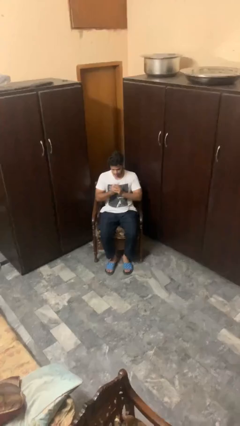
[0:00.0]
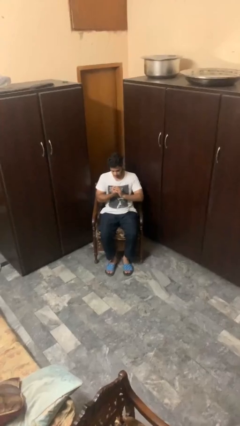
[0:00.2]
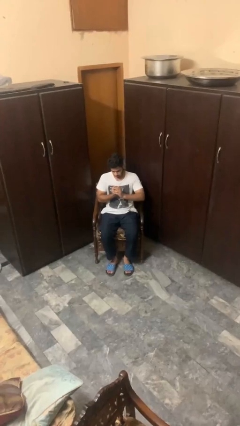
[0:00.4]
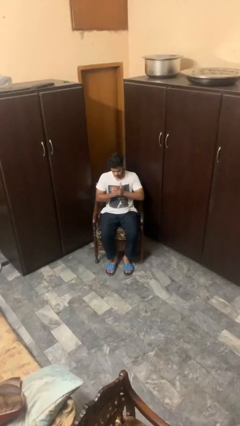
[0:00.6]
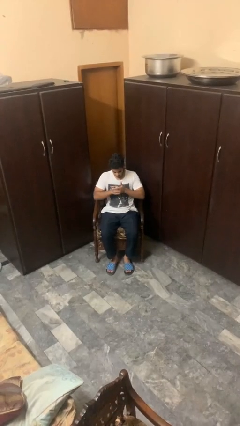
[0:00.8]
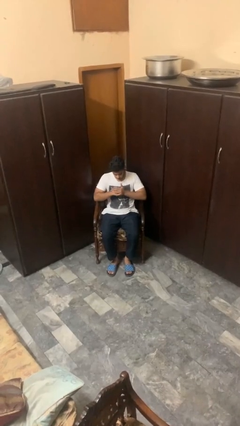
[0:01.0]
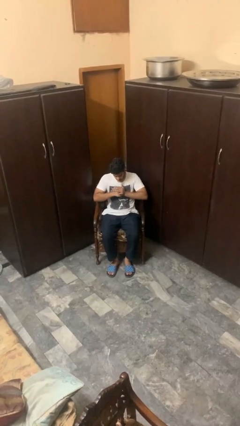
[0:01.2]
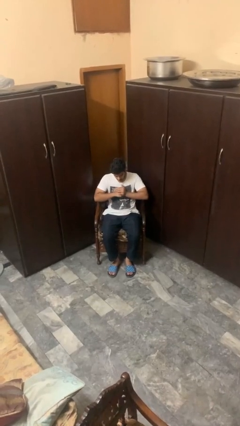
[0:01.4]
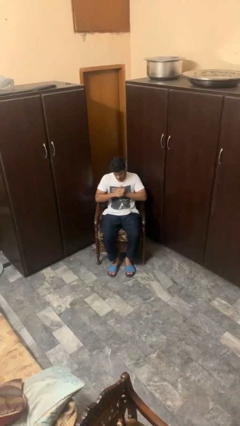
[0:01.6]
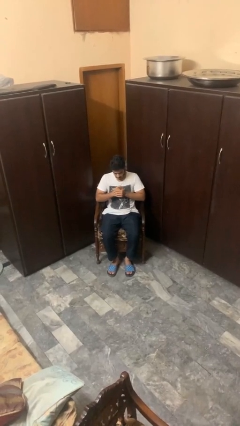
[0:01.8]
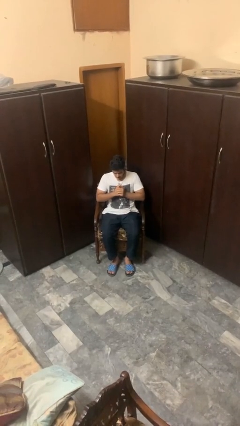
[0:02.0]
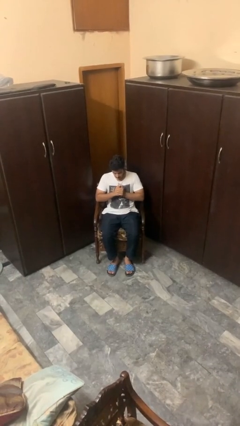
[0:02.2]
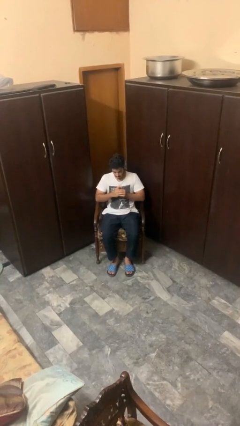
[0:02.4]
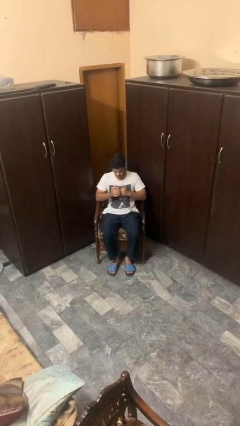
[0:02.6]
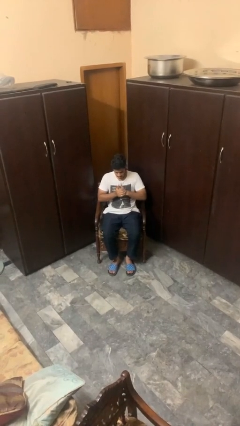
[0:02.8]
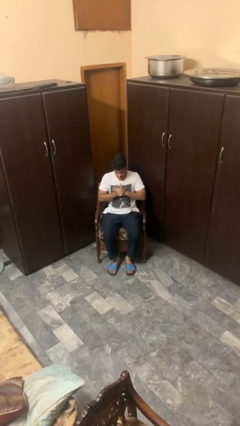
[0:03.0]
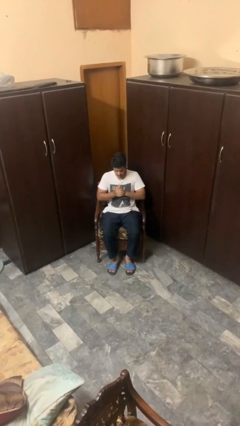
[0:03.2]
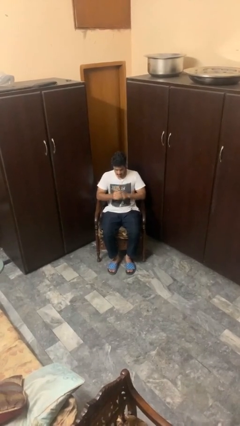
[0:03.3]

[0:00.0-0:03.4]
person cracks knuckles

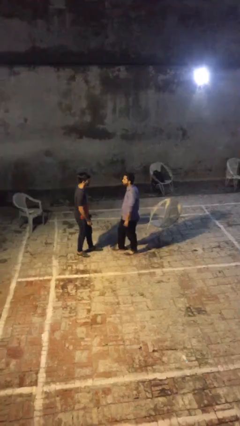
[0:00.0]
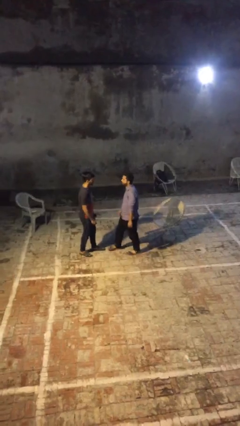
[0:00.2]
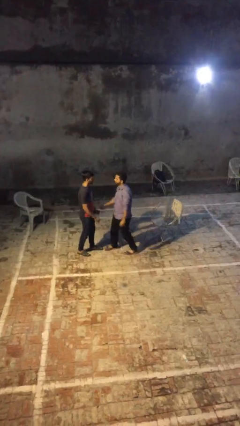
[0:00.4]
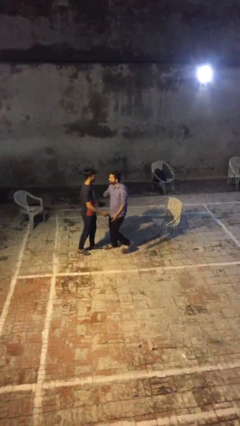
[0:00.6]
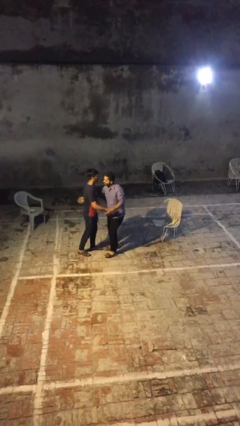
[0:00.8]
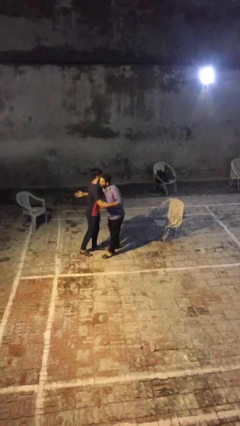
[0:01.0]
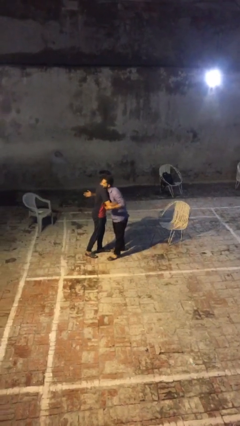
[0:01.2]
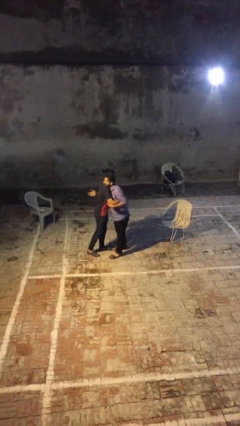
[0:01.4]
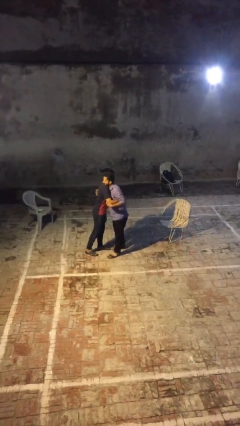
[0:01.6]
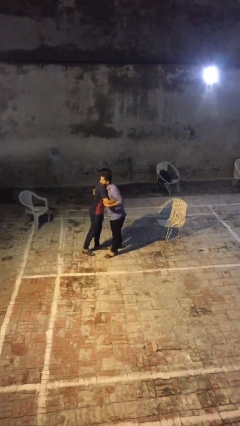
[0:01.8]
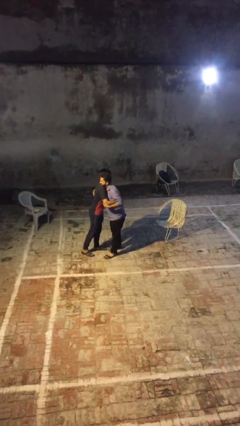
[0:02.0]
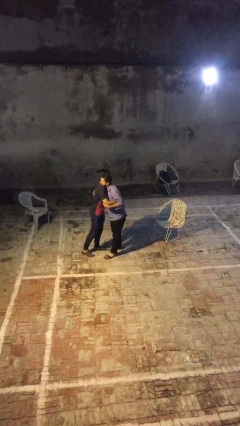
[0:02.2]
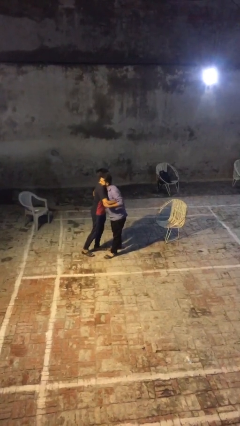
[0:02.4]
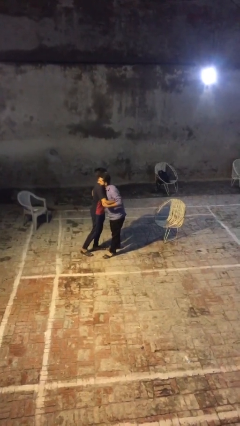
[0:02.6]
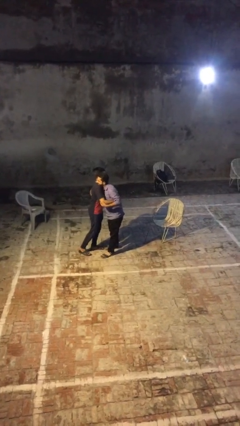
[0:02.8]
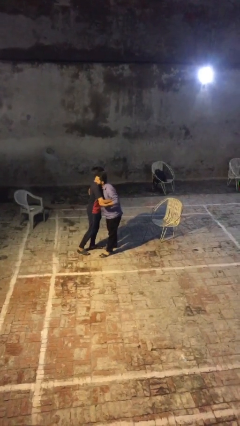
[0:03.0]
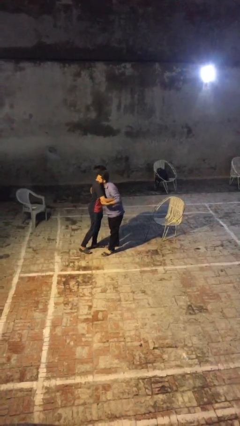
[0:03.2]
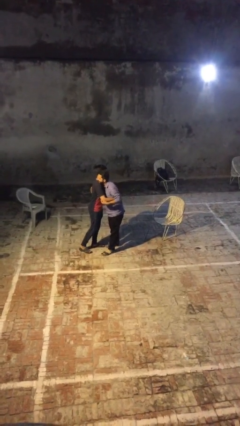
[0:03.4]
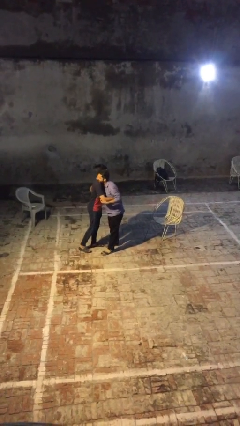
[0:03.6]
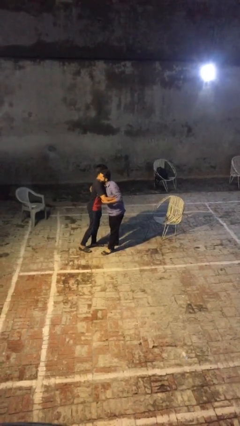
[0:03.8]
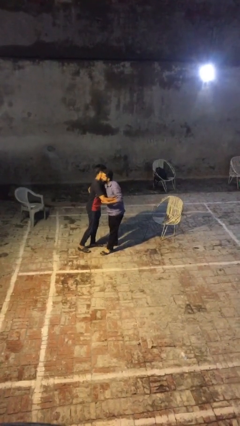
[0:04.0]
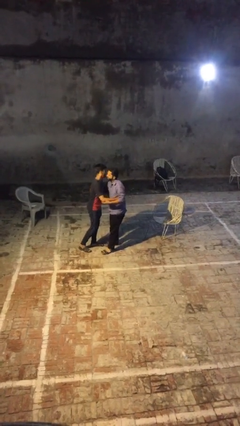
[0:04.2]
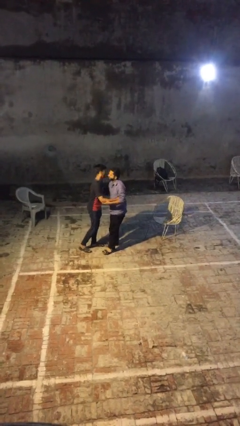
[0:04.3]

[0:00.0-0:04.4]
person embraces person

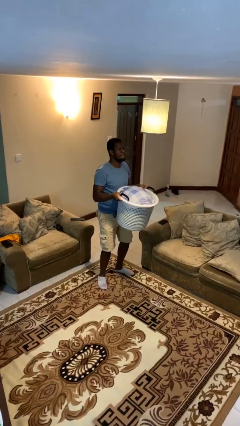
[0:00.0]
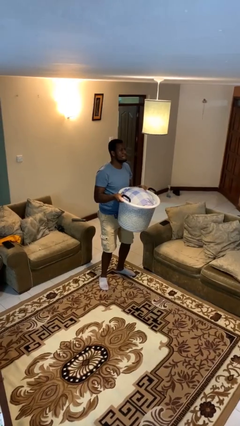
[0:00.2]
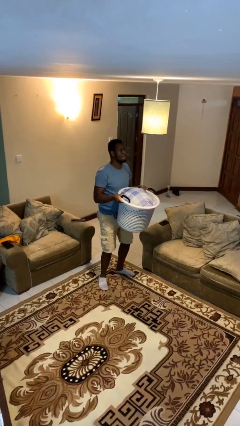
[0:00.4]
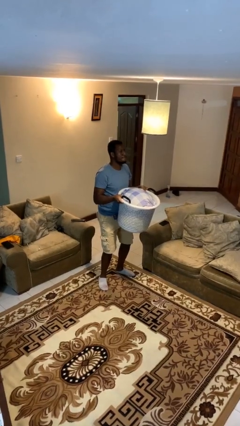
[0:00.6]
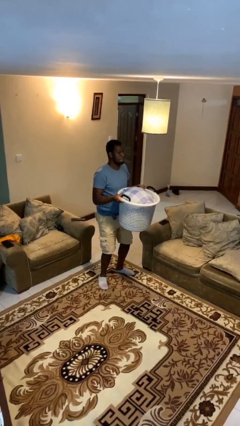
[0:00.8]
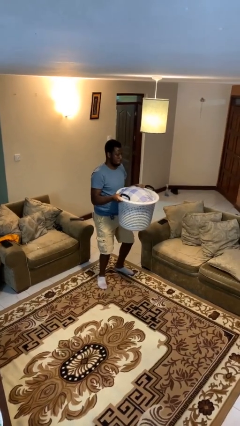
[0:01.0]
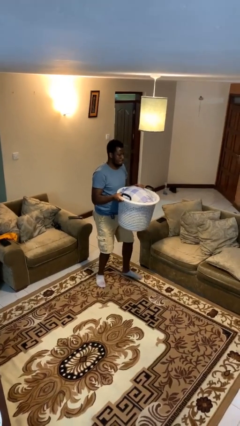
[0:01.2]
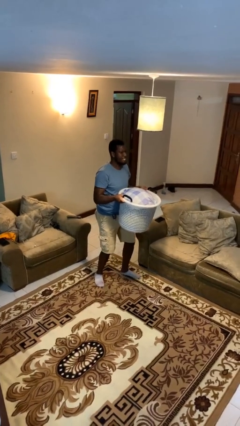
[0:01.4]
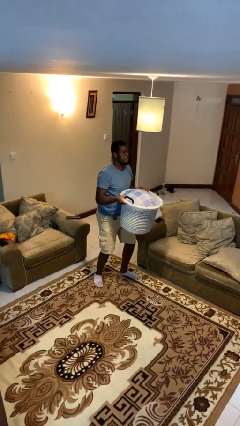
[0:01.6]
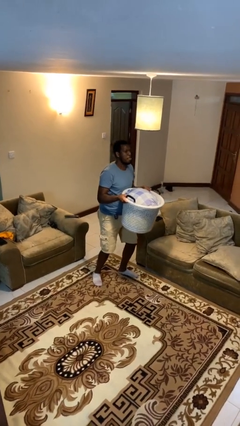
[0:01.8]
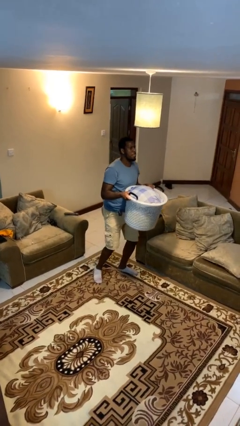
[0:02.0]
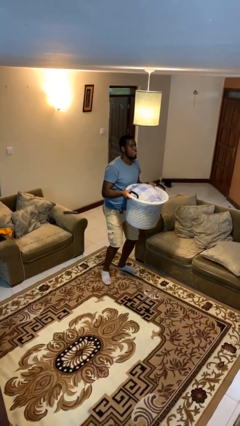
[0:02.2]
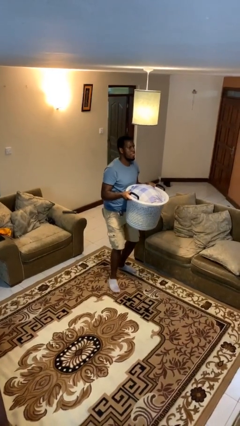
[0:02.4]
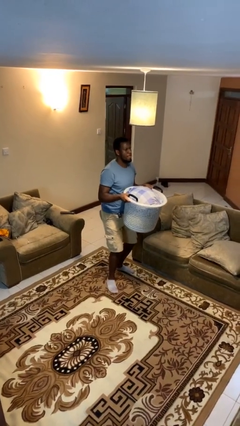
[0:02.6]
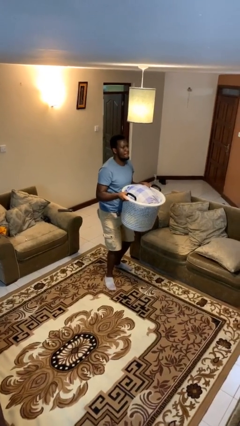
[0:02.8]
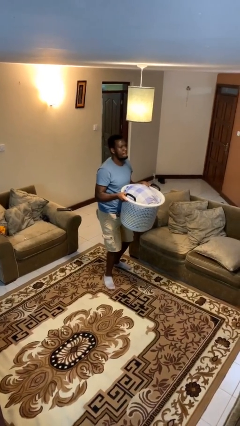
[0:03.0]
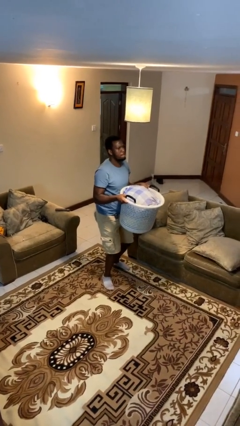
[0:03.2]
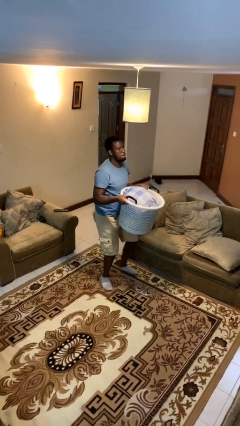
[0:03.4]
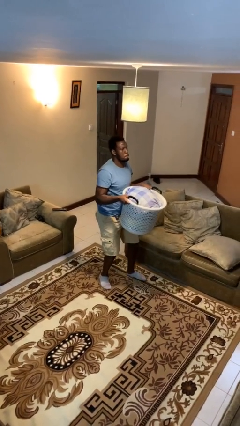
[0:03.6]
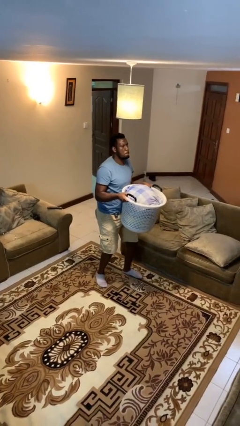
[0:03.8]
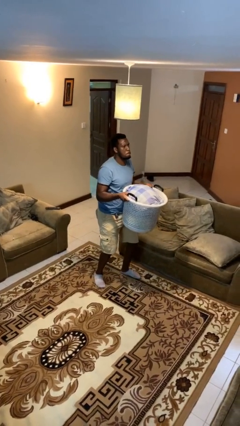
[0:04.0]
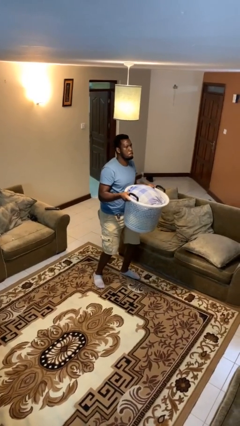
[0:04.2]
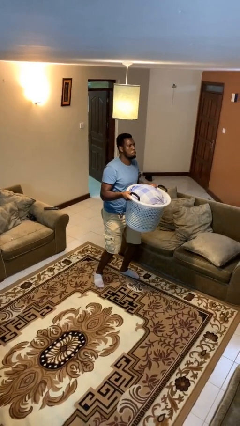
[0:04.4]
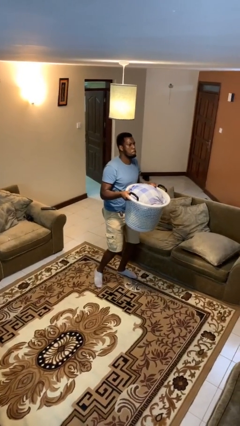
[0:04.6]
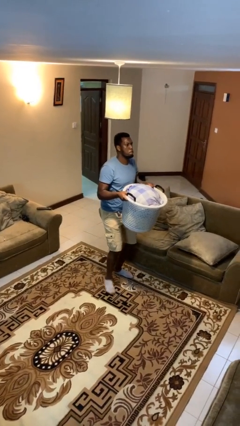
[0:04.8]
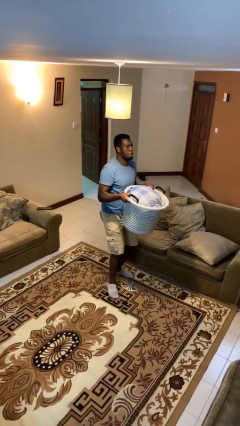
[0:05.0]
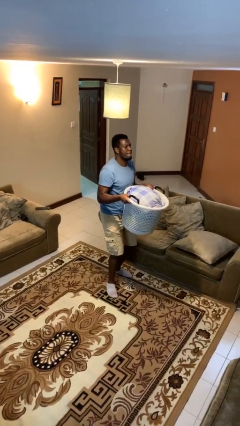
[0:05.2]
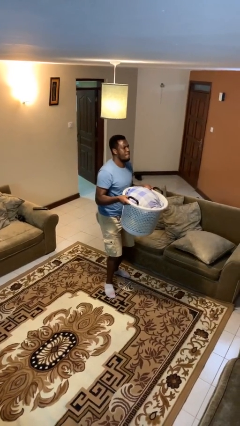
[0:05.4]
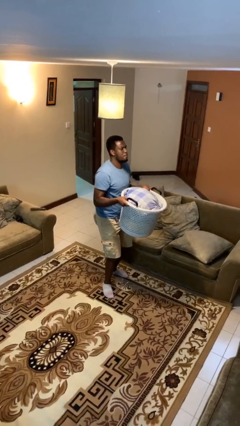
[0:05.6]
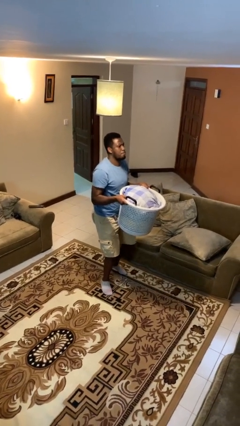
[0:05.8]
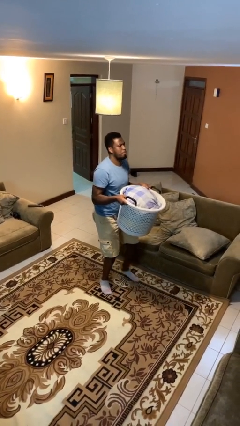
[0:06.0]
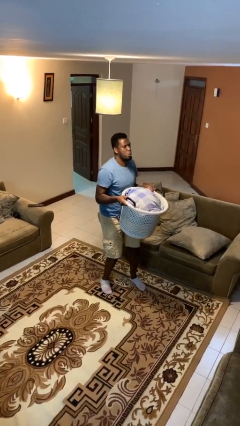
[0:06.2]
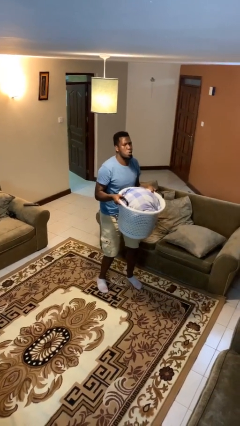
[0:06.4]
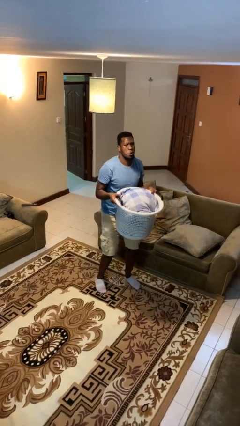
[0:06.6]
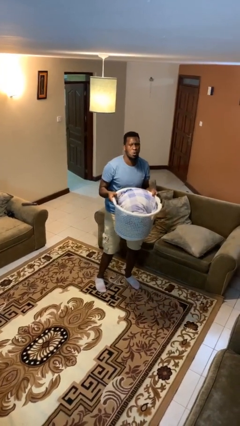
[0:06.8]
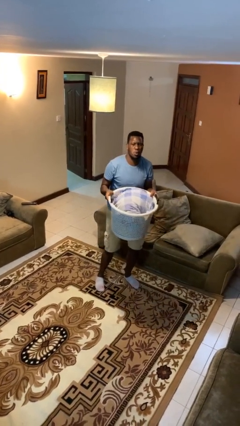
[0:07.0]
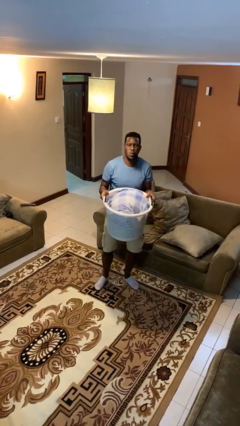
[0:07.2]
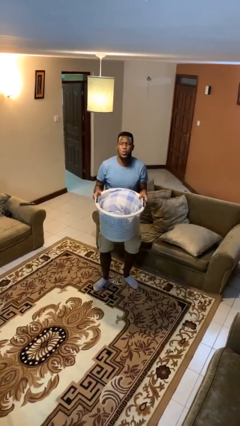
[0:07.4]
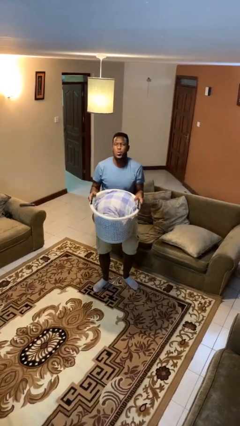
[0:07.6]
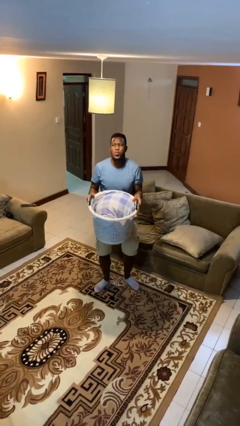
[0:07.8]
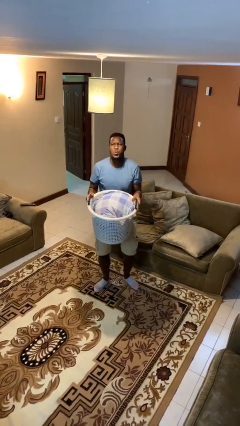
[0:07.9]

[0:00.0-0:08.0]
person carries heavy object

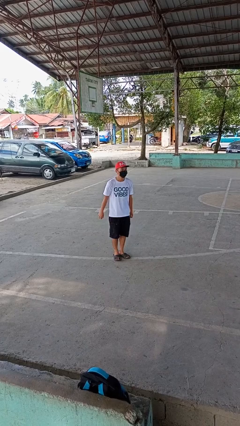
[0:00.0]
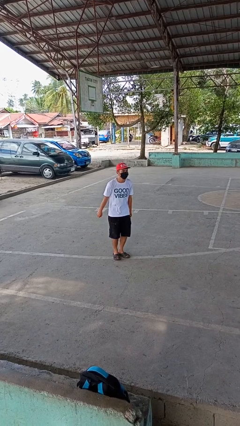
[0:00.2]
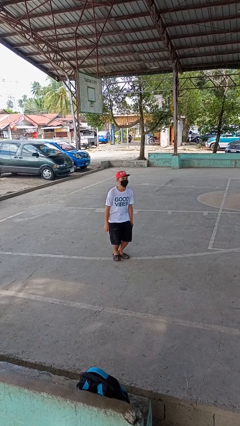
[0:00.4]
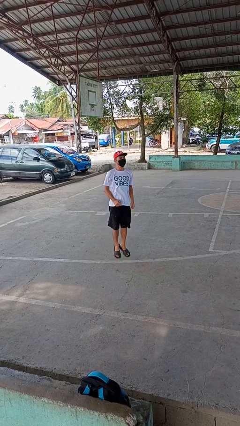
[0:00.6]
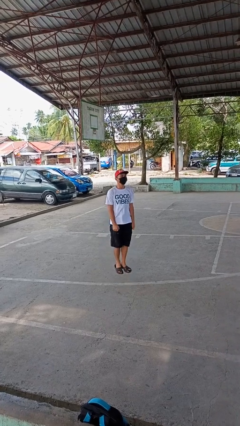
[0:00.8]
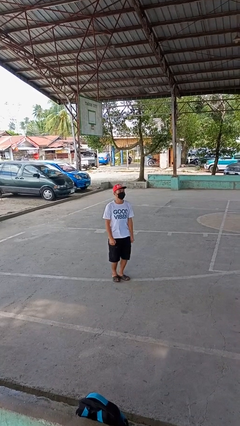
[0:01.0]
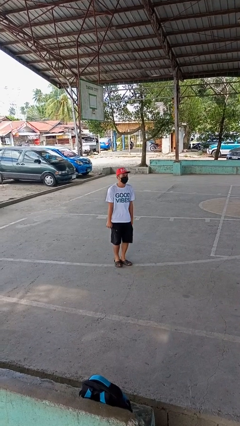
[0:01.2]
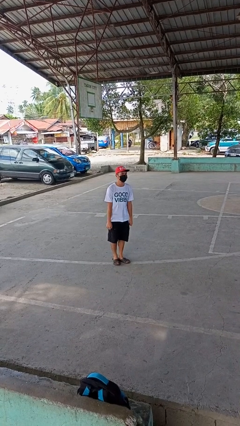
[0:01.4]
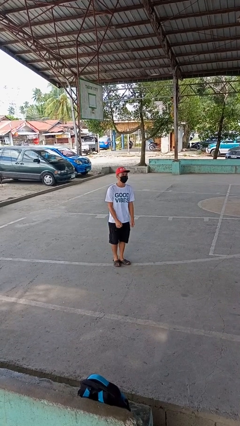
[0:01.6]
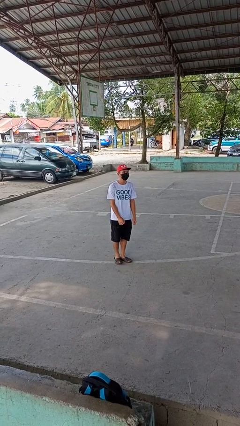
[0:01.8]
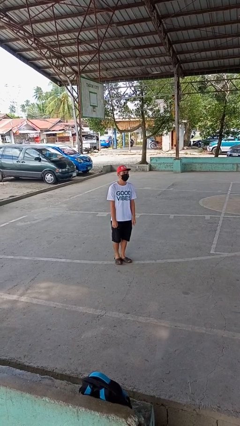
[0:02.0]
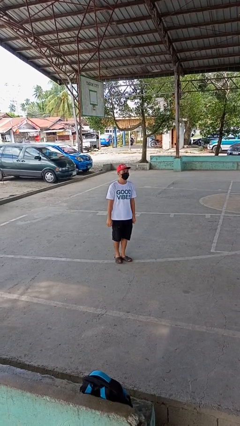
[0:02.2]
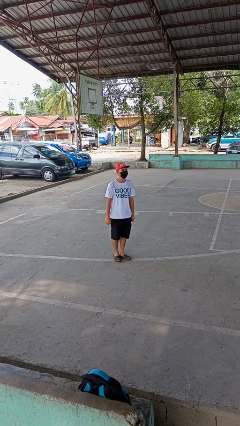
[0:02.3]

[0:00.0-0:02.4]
person jumps
